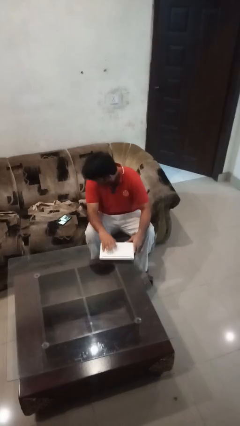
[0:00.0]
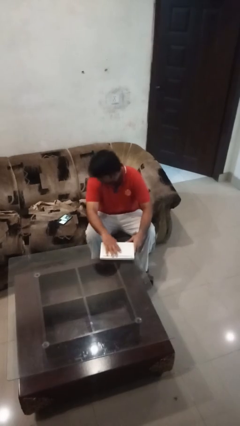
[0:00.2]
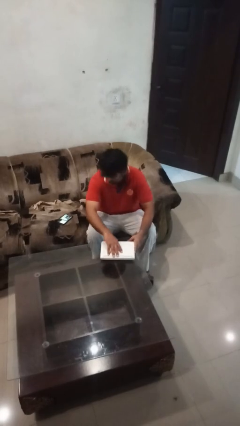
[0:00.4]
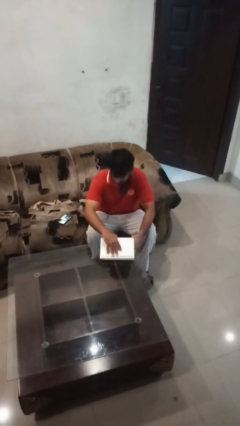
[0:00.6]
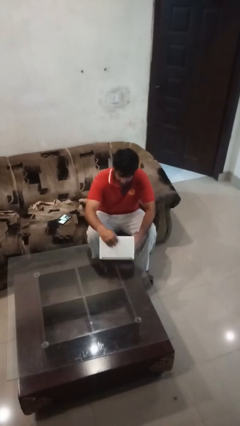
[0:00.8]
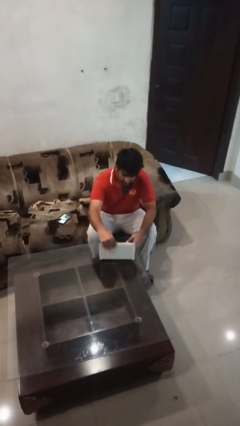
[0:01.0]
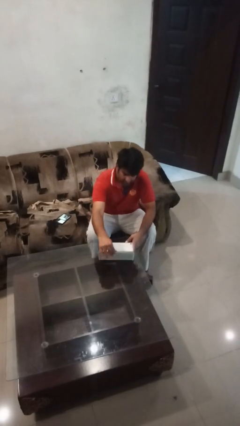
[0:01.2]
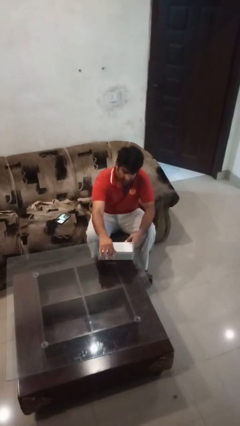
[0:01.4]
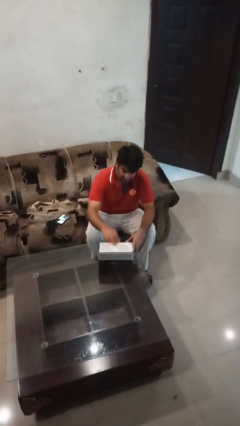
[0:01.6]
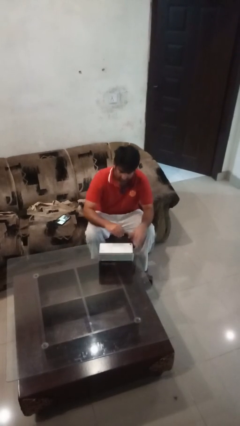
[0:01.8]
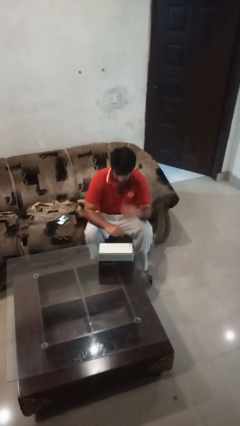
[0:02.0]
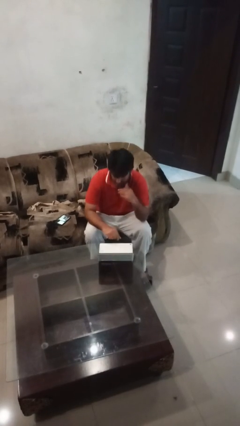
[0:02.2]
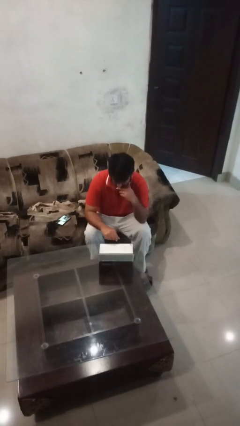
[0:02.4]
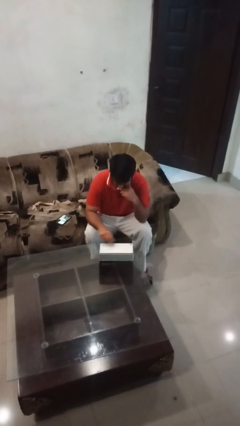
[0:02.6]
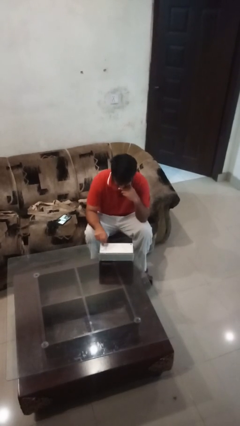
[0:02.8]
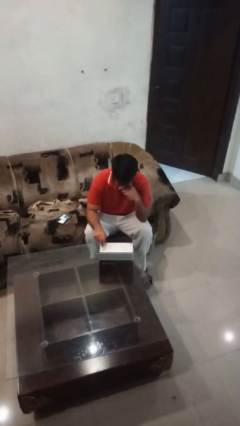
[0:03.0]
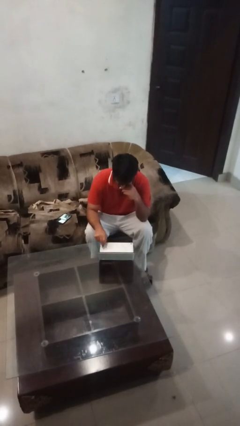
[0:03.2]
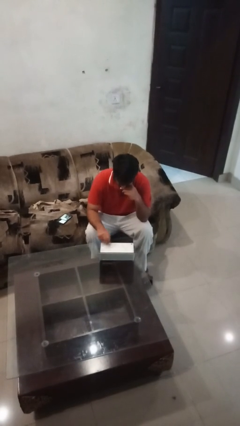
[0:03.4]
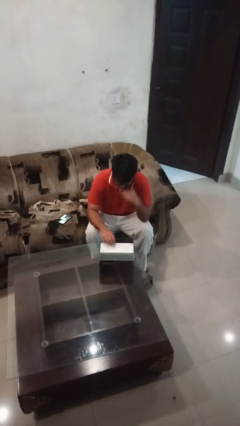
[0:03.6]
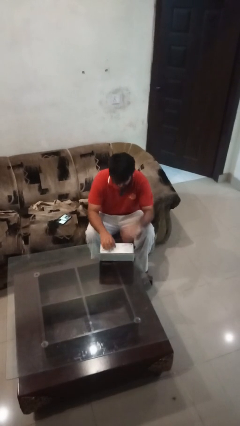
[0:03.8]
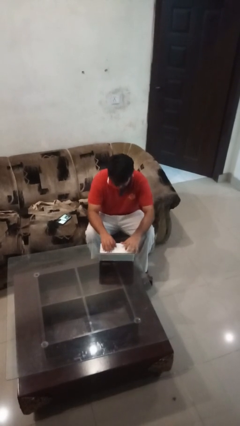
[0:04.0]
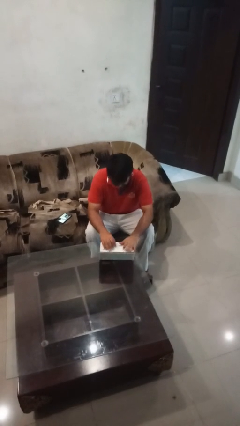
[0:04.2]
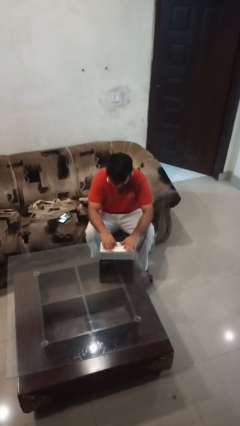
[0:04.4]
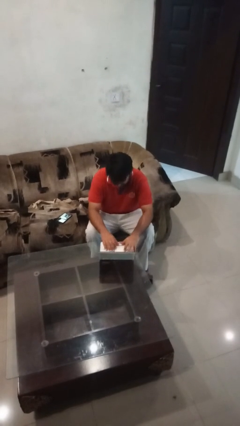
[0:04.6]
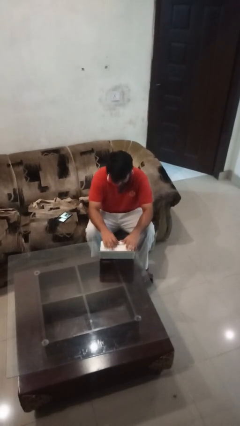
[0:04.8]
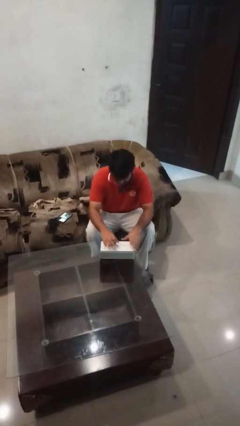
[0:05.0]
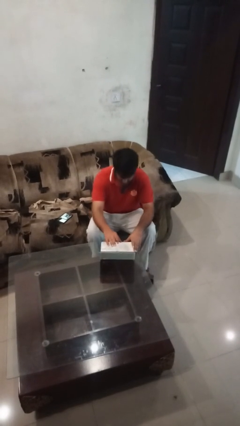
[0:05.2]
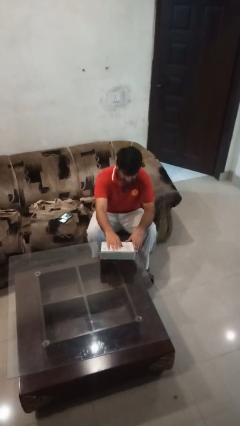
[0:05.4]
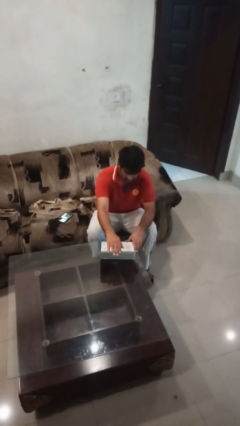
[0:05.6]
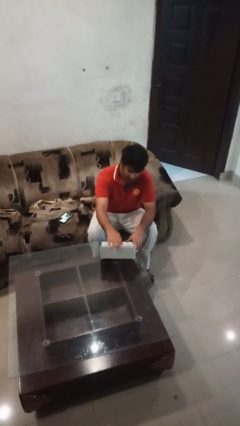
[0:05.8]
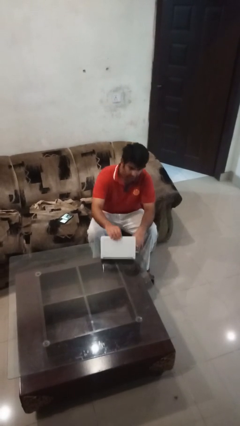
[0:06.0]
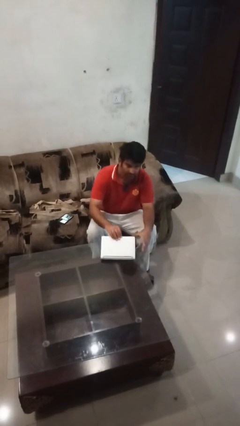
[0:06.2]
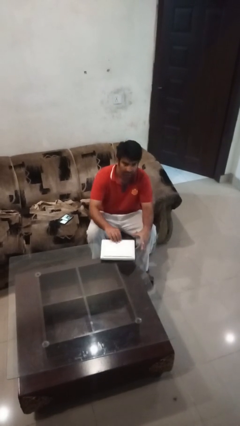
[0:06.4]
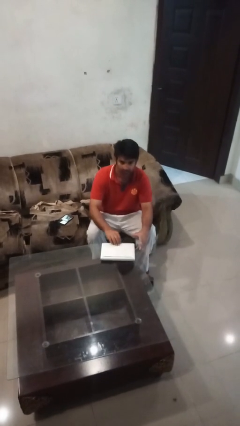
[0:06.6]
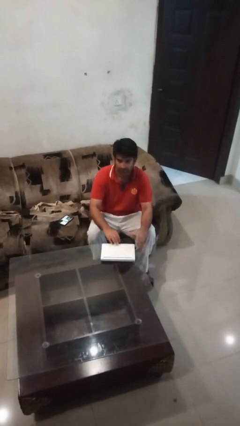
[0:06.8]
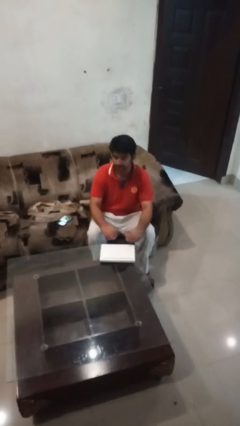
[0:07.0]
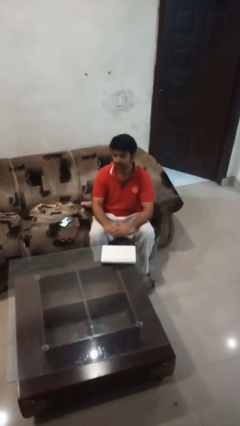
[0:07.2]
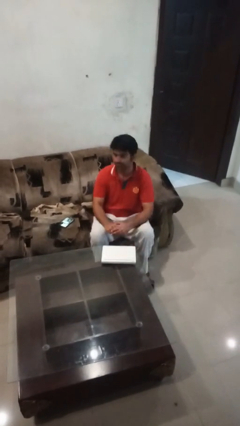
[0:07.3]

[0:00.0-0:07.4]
person interacts with laptop

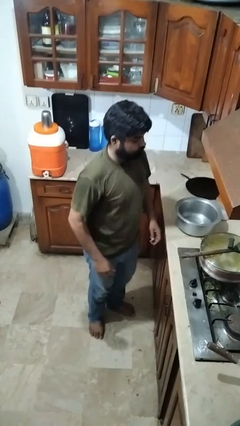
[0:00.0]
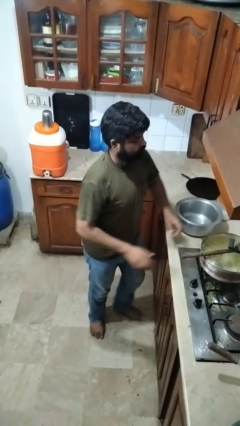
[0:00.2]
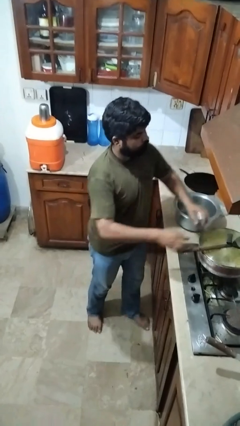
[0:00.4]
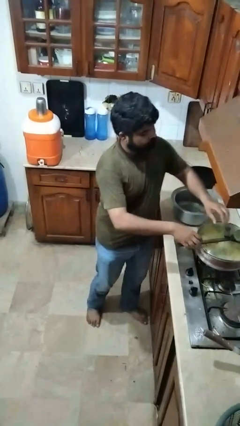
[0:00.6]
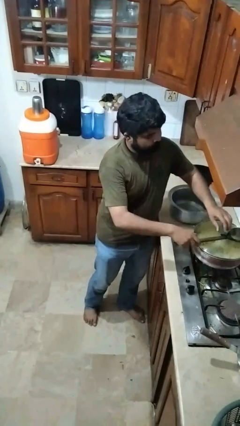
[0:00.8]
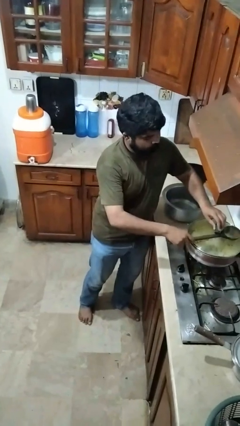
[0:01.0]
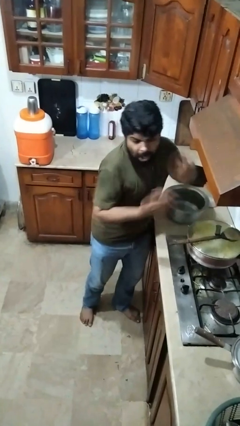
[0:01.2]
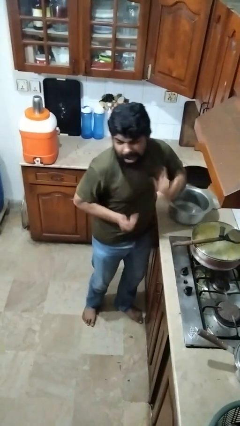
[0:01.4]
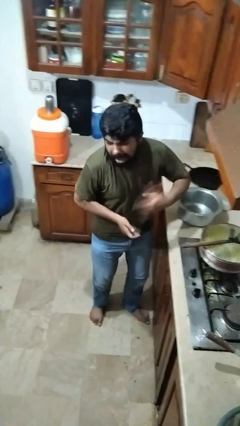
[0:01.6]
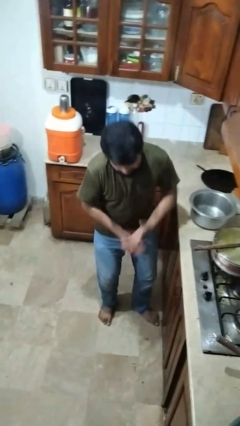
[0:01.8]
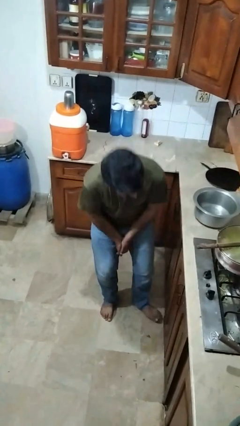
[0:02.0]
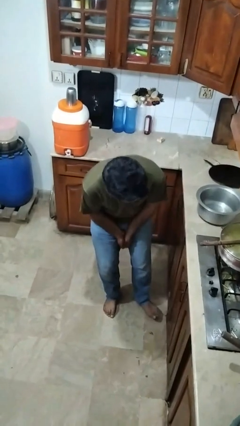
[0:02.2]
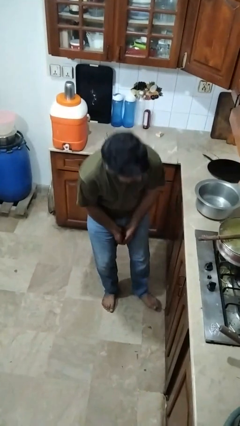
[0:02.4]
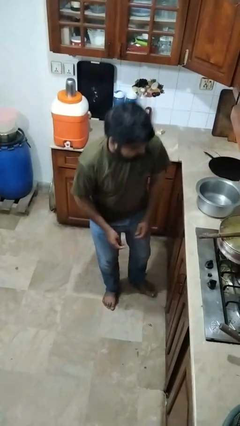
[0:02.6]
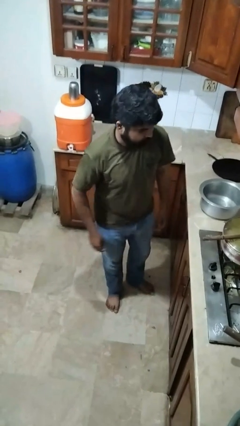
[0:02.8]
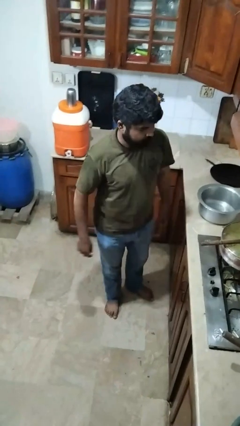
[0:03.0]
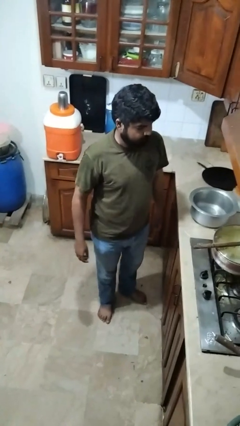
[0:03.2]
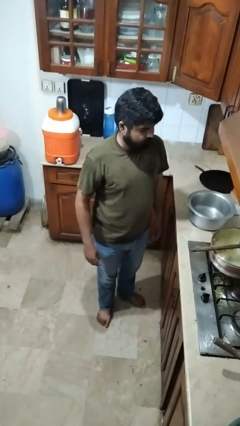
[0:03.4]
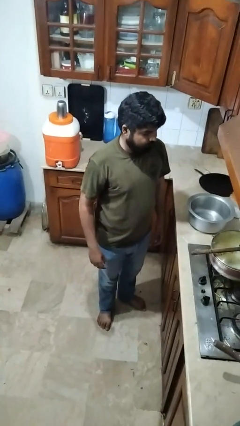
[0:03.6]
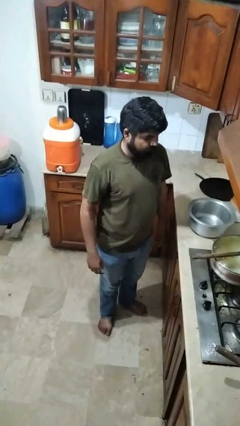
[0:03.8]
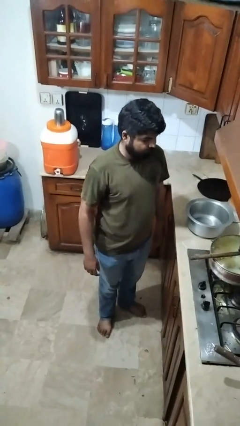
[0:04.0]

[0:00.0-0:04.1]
person burns hand

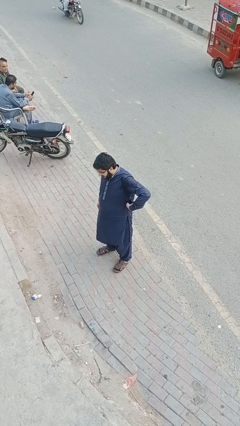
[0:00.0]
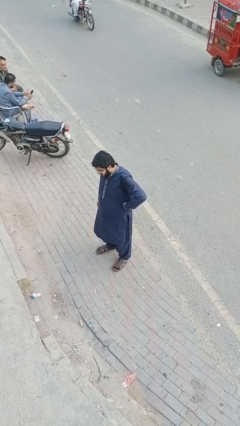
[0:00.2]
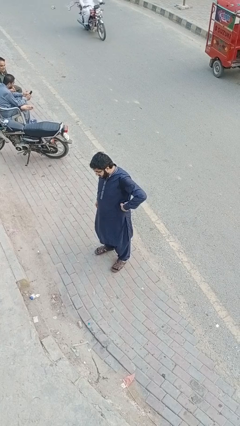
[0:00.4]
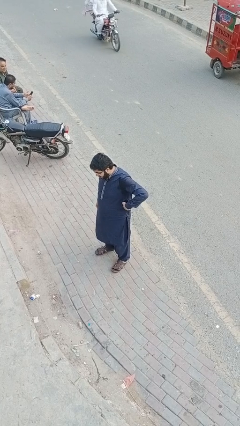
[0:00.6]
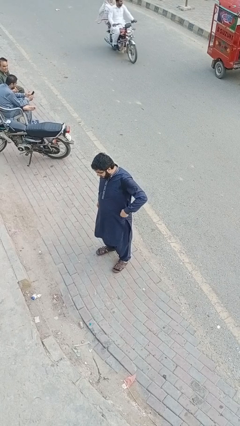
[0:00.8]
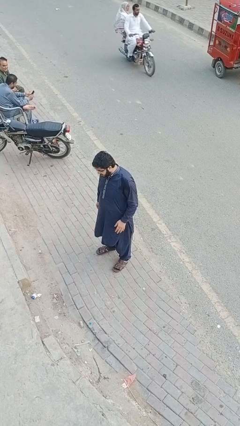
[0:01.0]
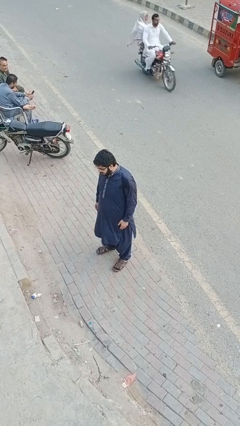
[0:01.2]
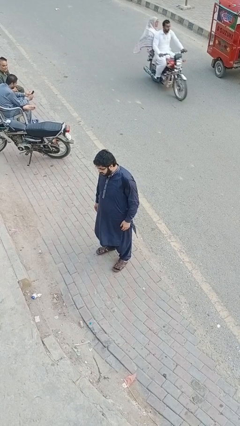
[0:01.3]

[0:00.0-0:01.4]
person puts phone into pocket

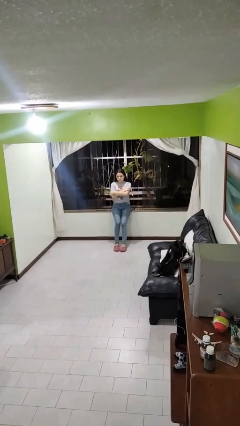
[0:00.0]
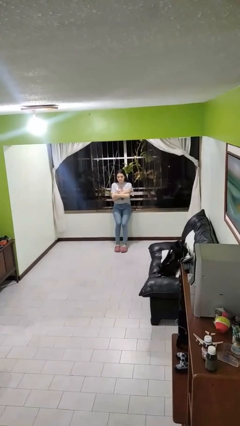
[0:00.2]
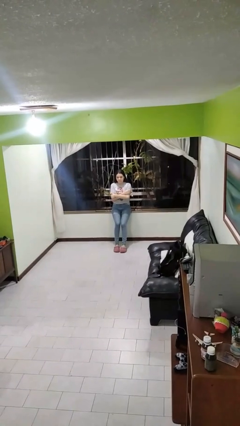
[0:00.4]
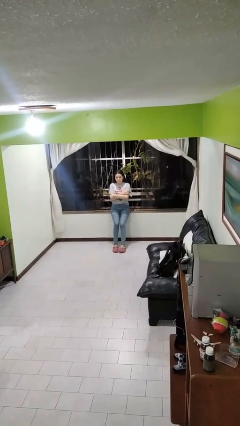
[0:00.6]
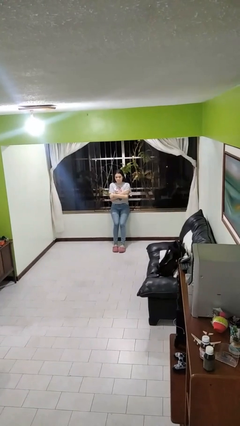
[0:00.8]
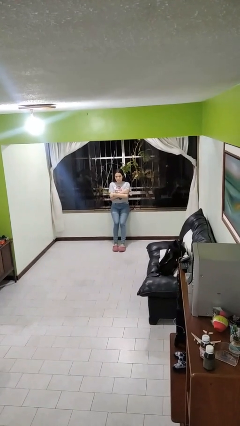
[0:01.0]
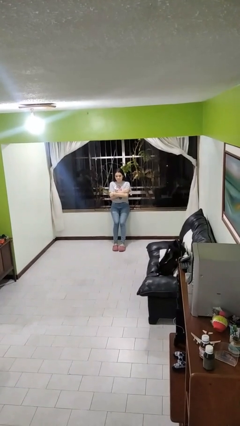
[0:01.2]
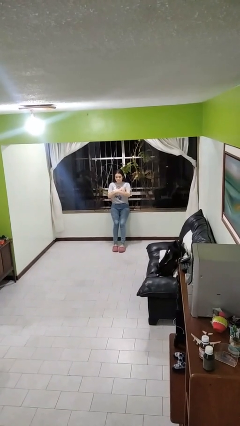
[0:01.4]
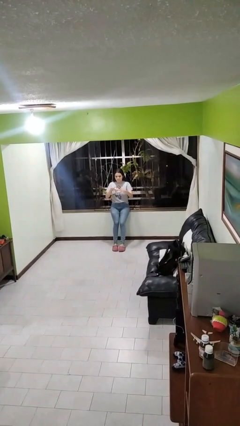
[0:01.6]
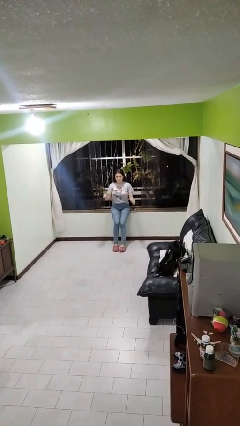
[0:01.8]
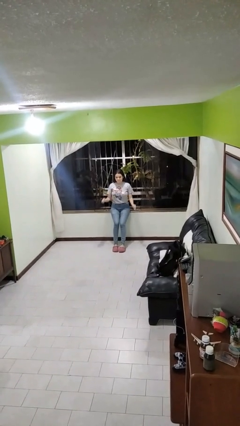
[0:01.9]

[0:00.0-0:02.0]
person crosses arms

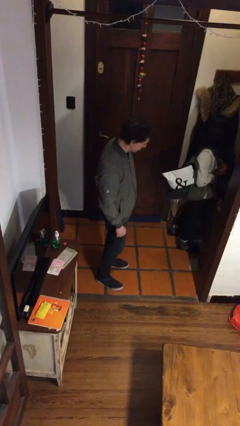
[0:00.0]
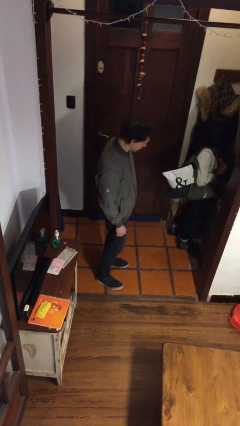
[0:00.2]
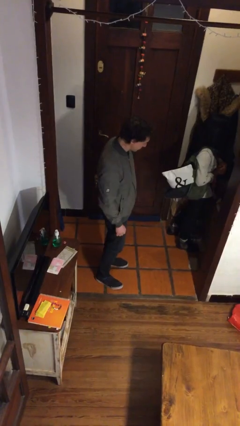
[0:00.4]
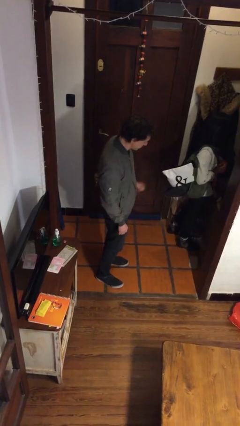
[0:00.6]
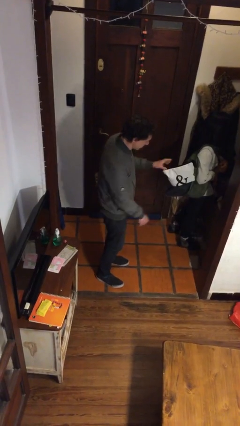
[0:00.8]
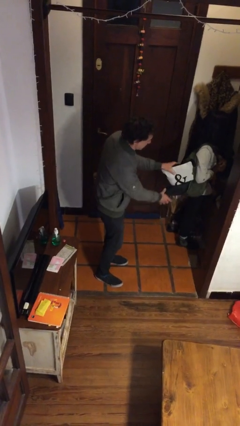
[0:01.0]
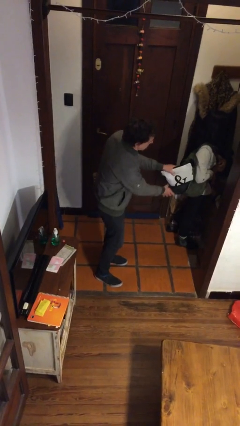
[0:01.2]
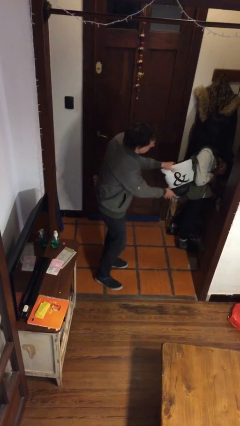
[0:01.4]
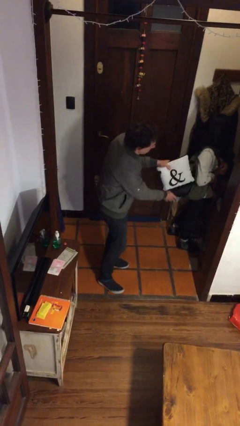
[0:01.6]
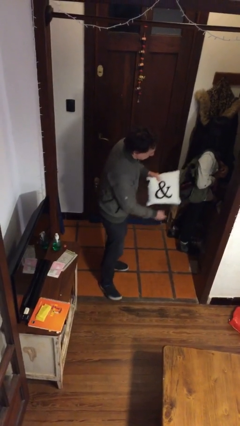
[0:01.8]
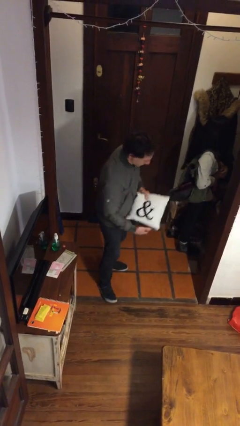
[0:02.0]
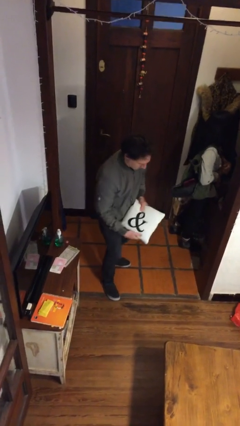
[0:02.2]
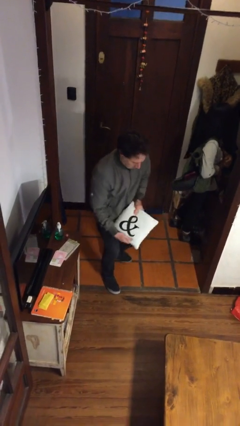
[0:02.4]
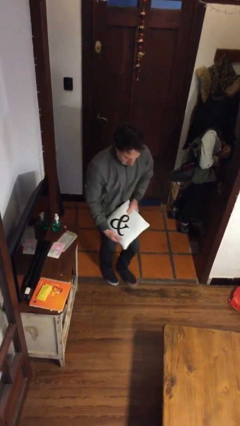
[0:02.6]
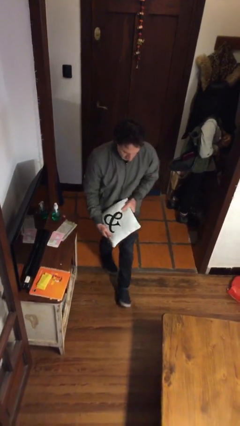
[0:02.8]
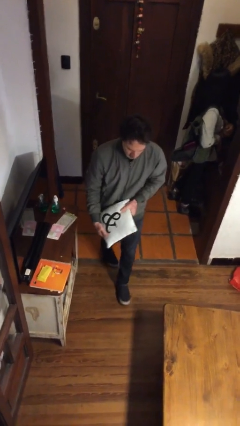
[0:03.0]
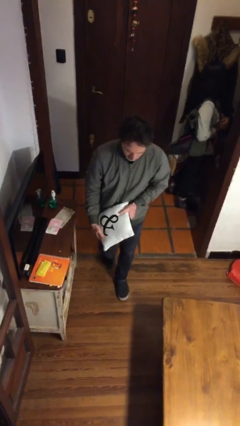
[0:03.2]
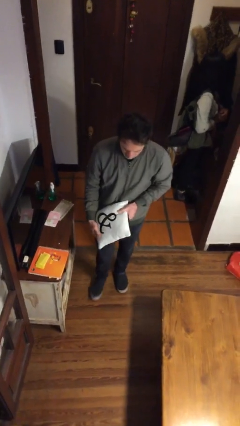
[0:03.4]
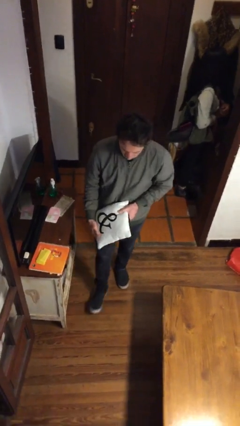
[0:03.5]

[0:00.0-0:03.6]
person steals object from person
